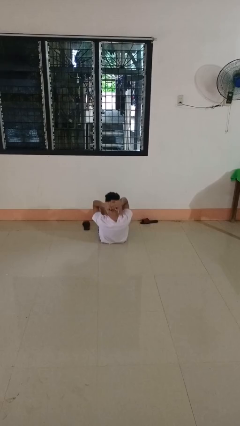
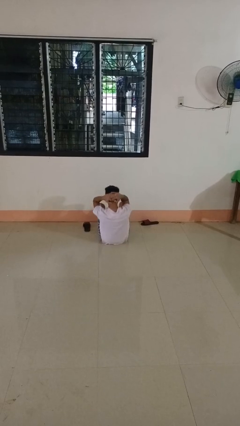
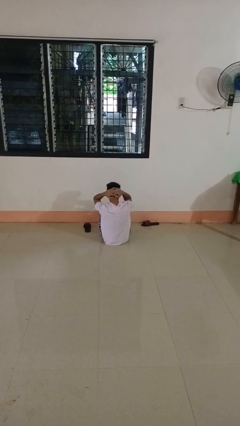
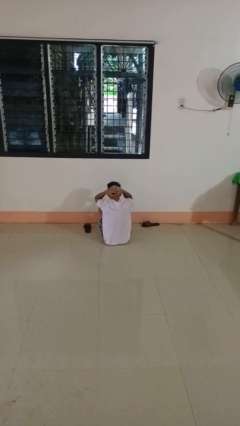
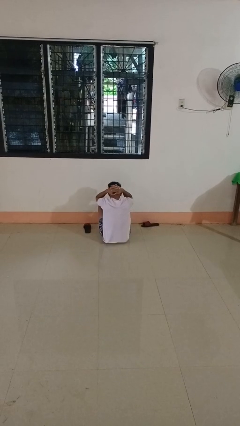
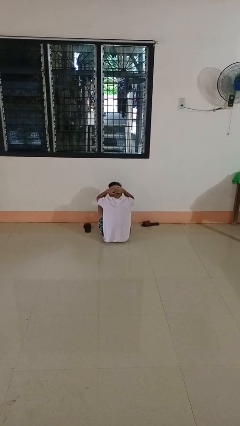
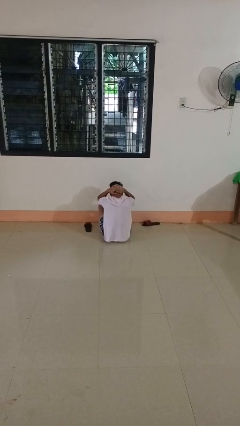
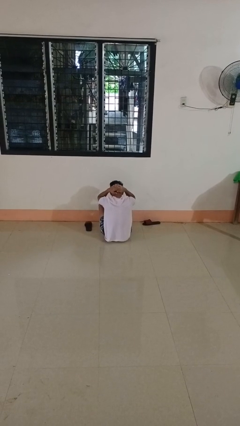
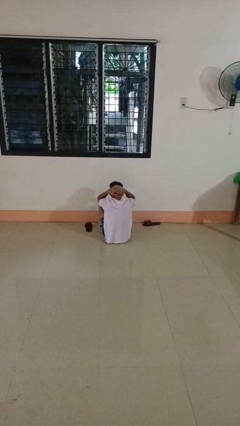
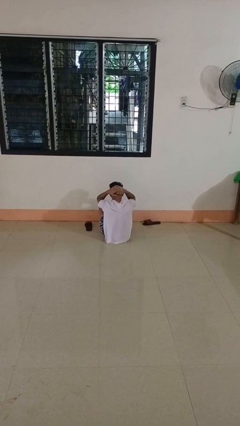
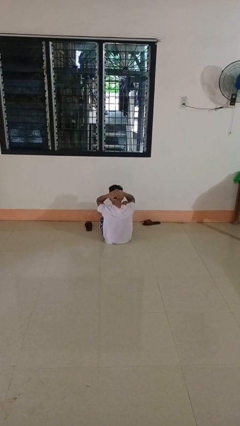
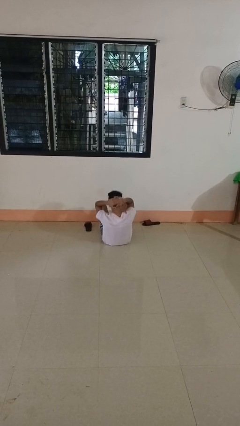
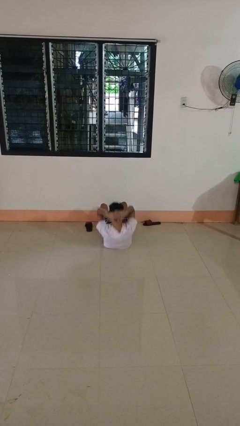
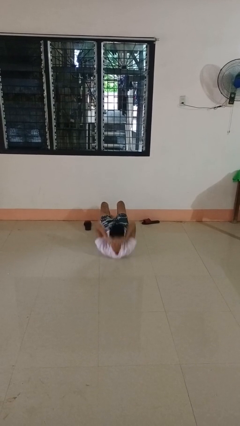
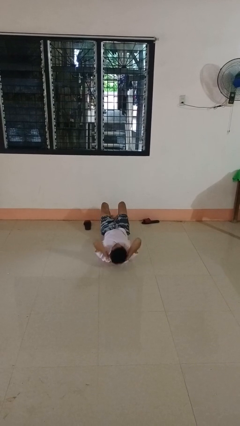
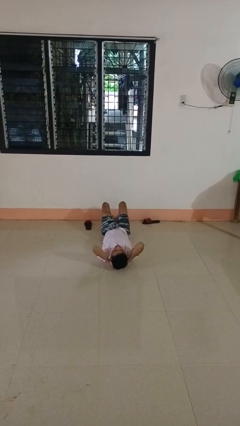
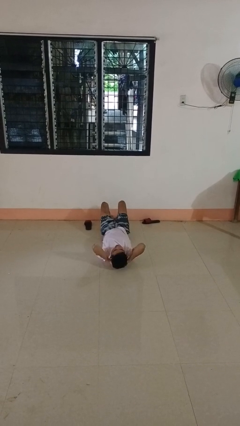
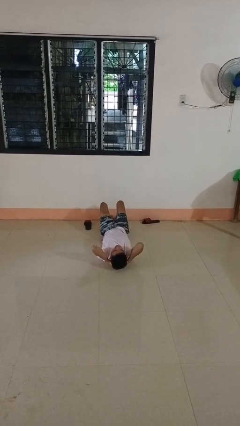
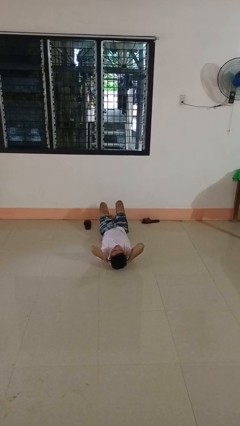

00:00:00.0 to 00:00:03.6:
person exercises with situp

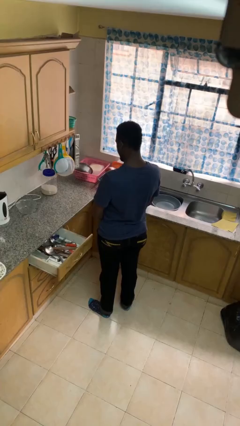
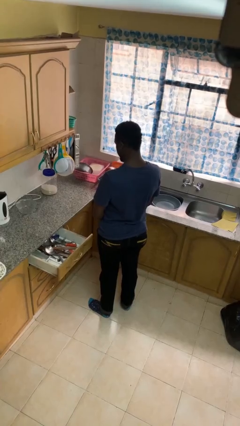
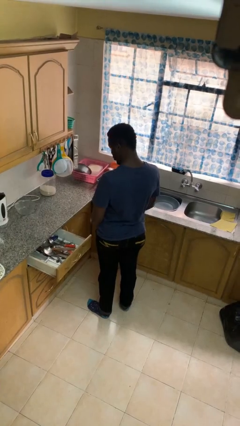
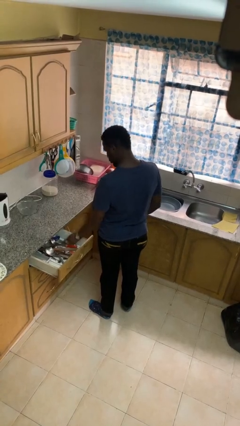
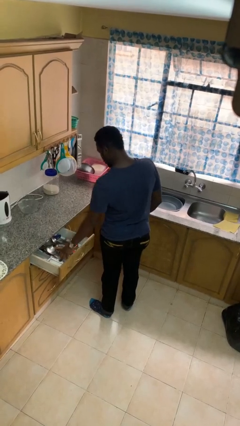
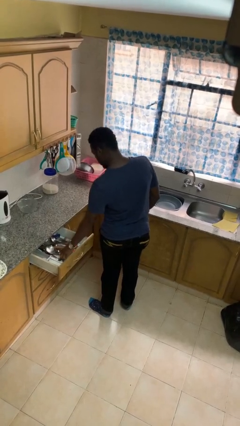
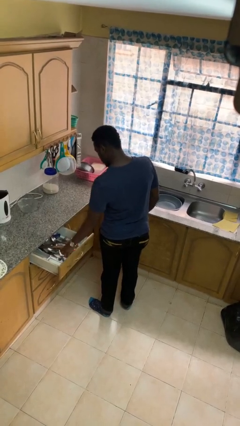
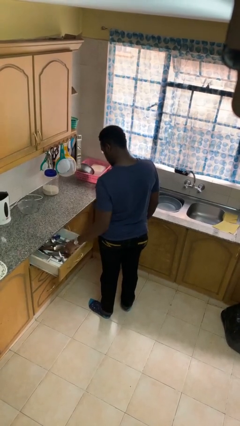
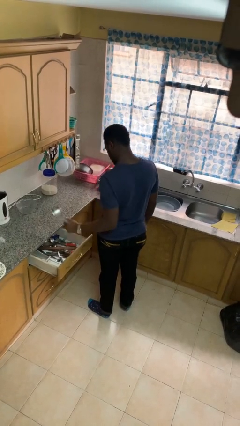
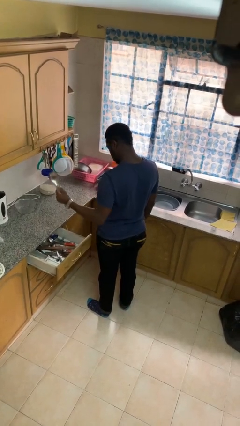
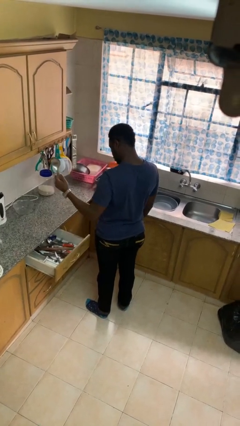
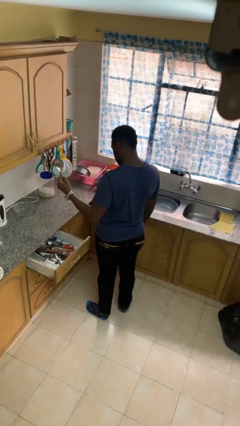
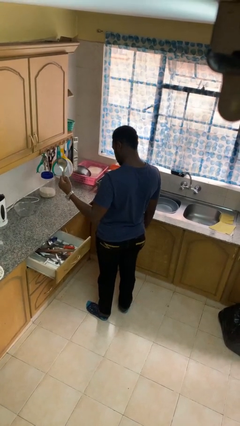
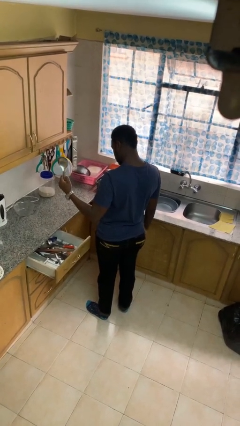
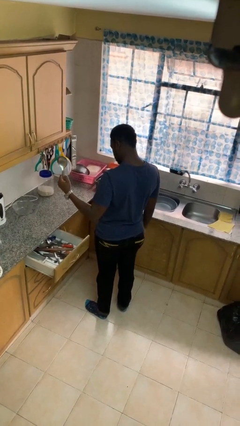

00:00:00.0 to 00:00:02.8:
person takes object from kitchen drawer

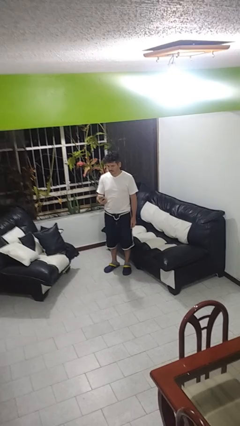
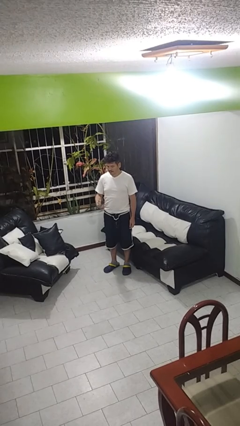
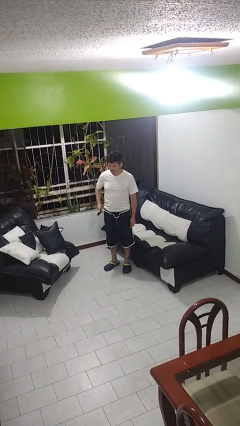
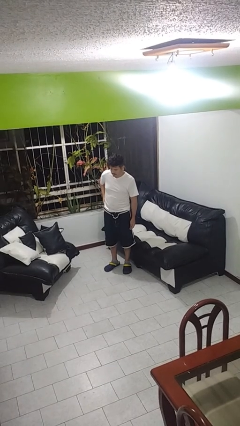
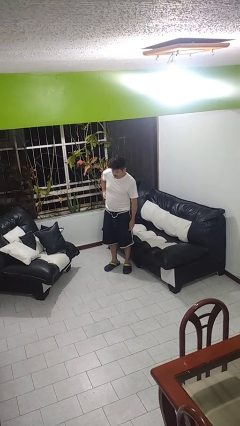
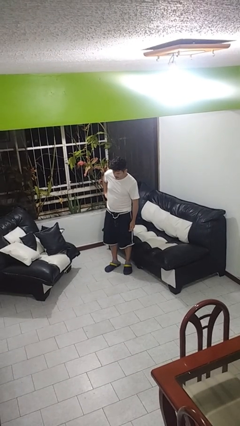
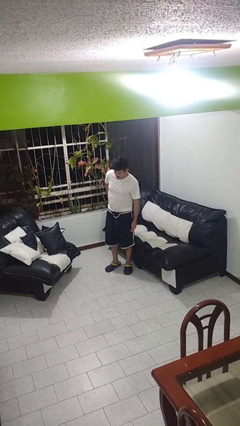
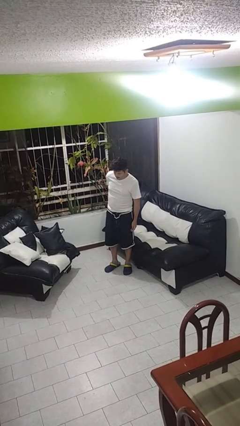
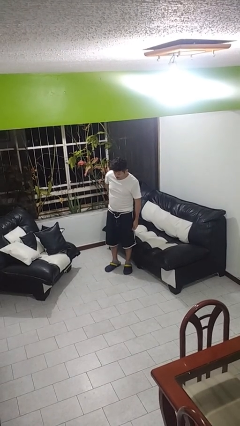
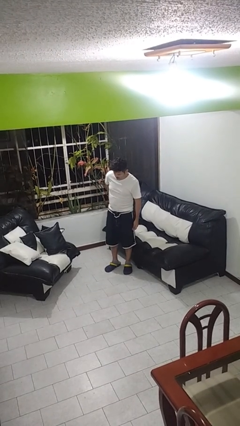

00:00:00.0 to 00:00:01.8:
person puts phone into pocket

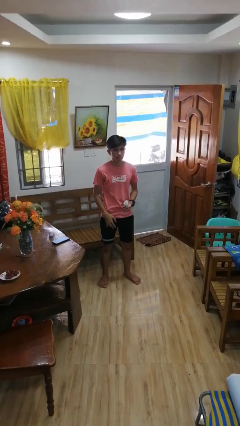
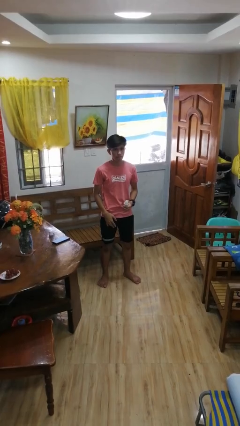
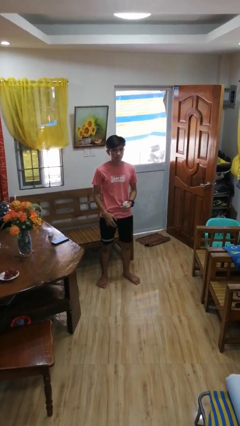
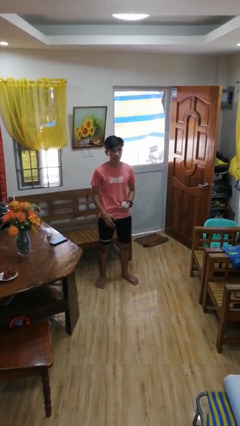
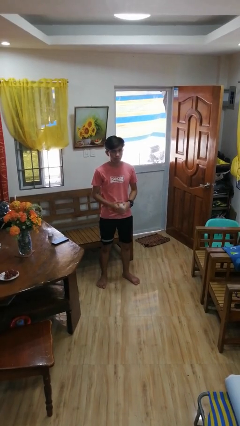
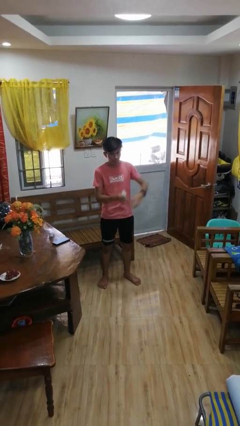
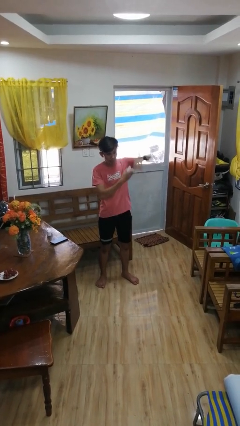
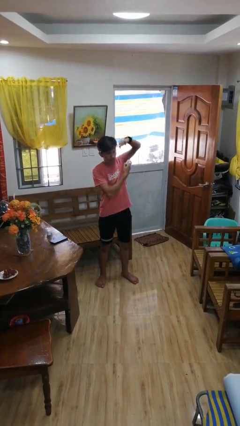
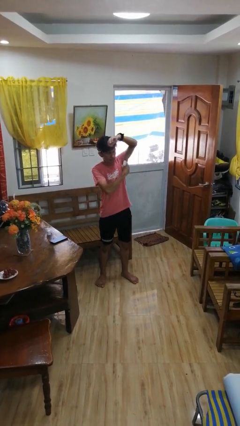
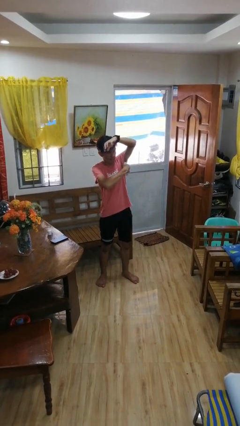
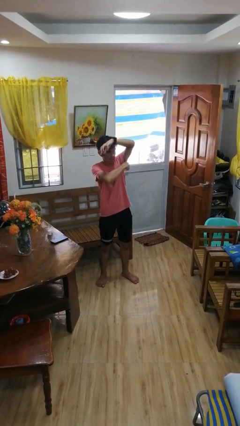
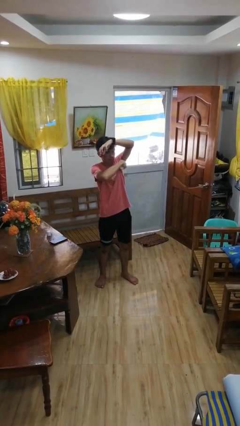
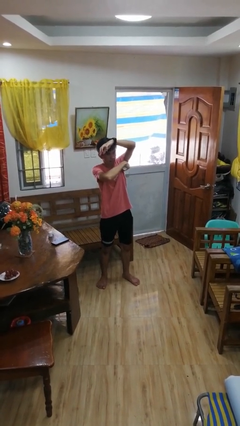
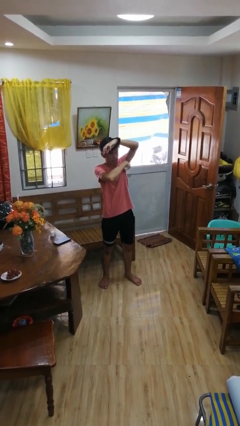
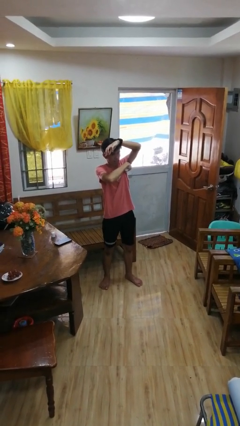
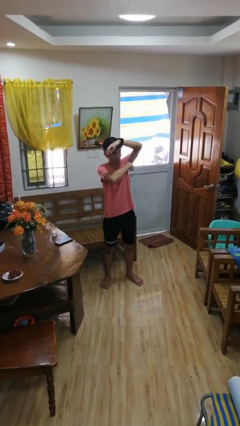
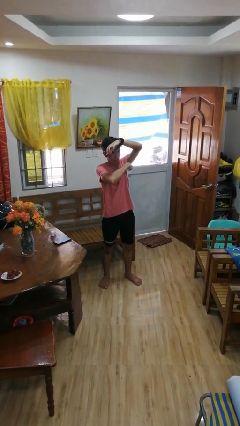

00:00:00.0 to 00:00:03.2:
person applies deodorant

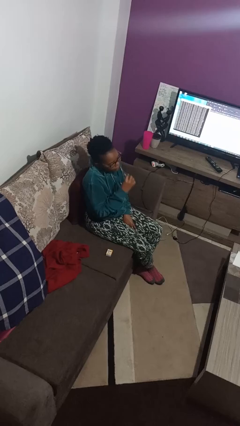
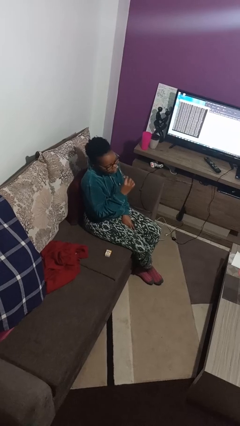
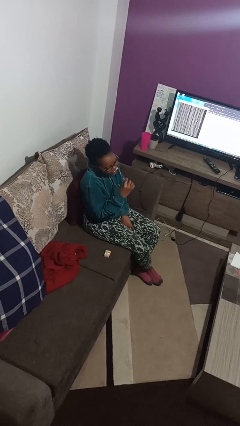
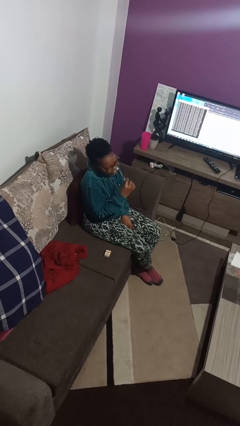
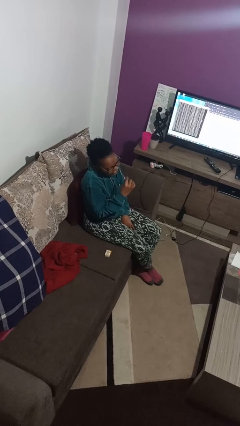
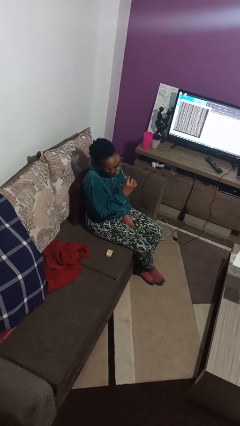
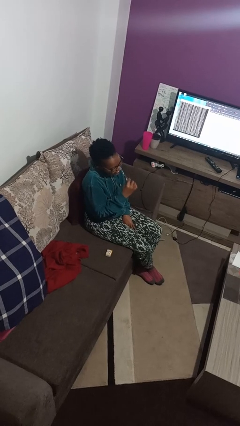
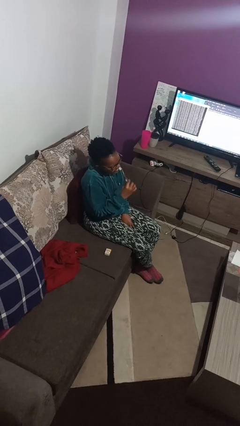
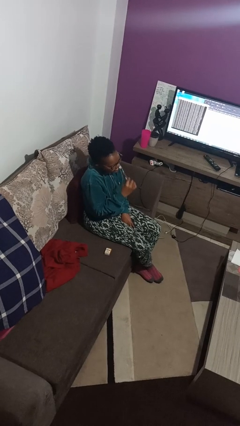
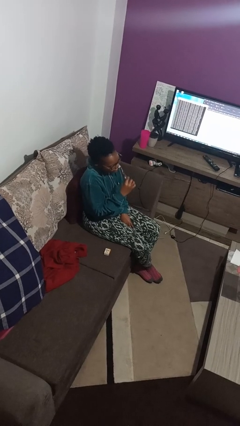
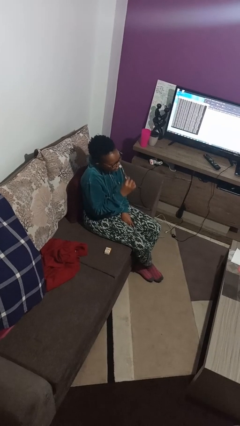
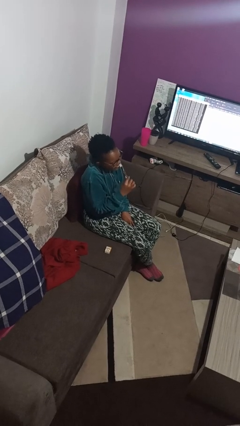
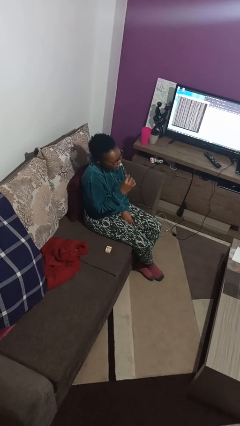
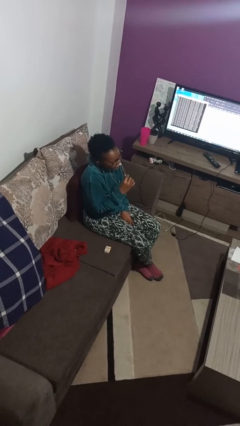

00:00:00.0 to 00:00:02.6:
person brushes teeth

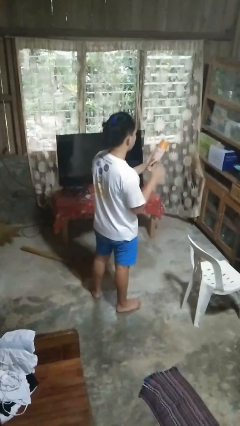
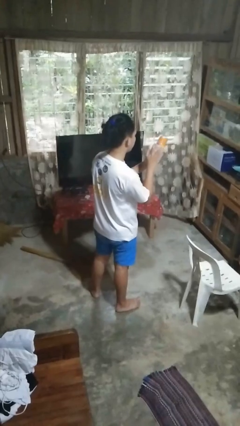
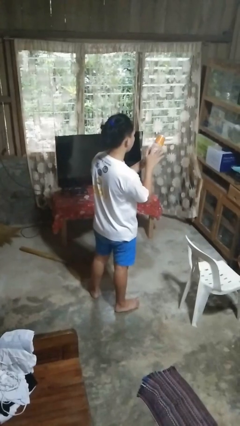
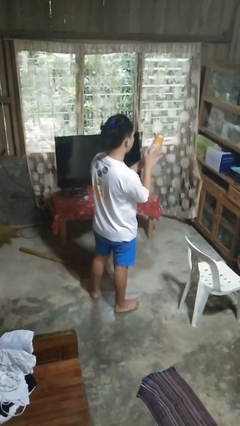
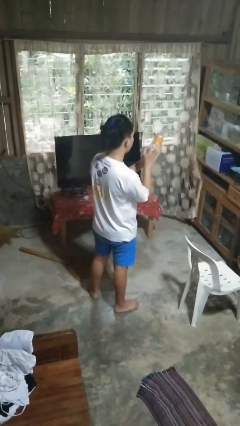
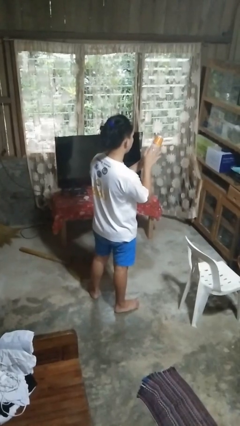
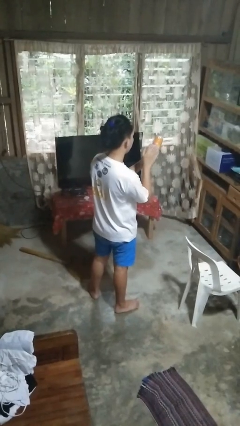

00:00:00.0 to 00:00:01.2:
person taps object with finger

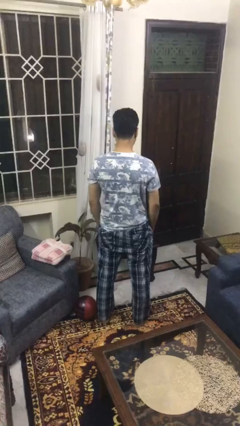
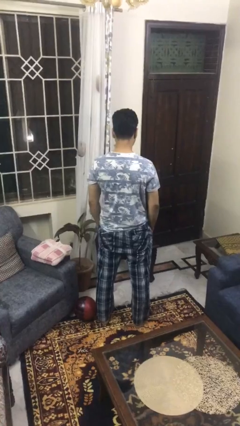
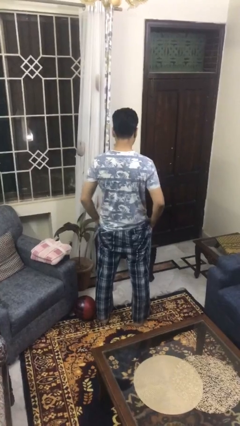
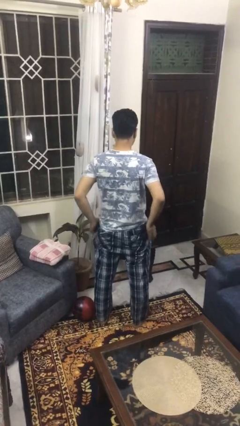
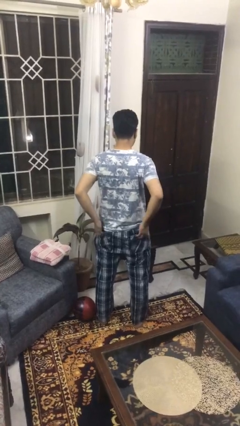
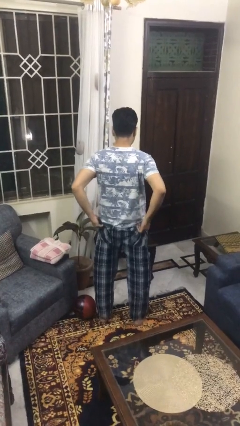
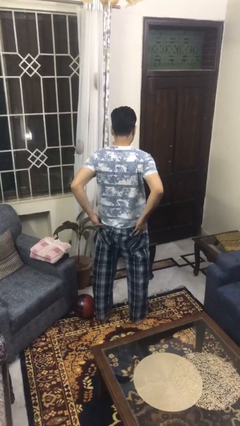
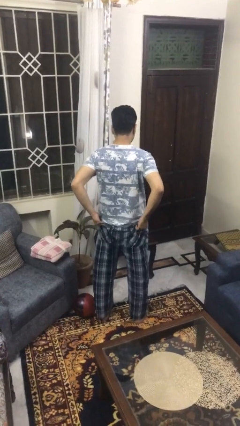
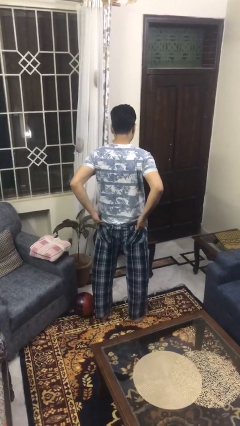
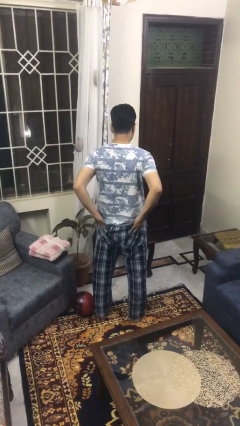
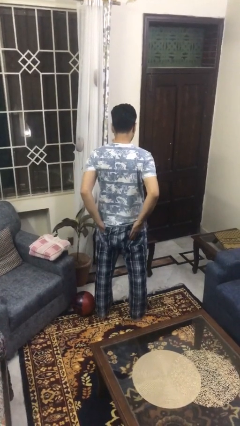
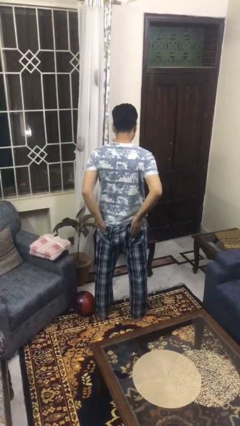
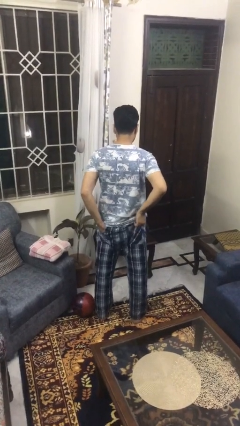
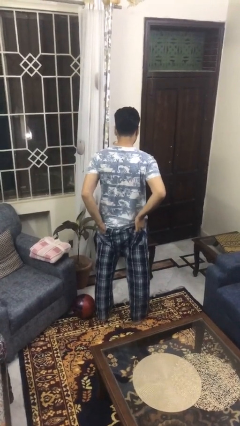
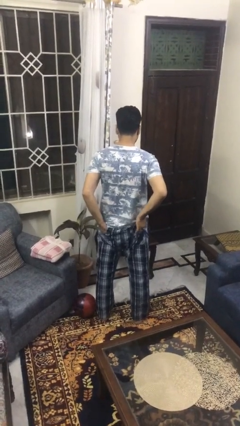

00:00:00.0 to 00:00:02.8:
person puts hands in back pockets
